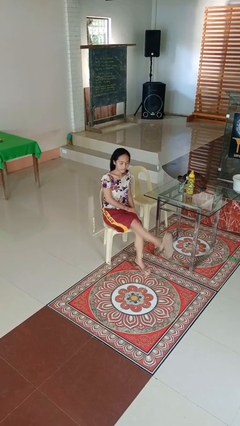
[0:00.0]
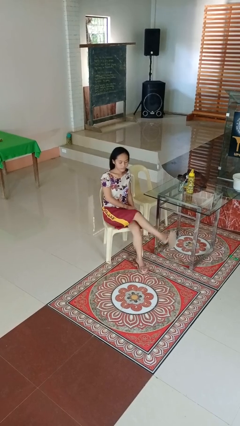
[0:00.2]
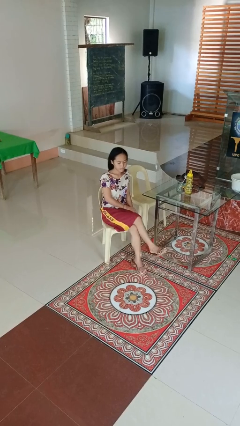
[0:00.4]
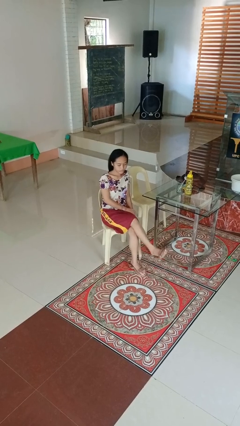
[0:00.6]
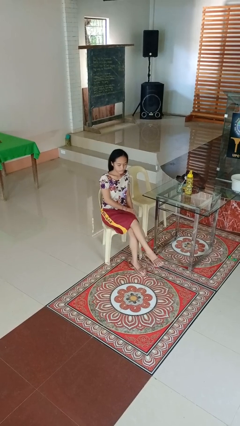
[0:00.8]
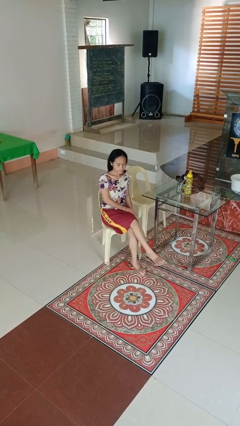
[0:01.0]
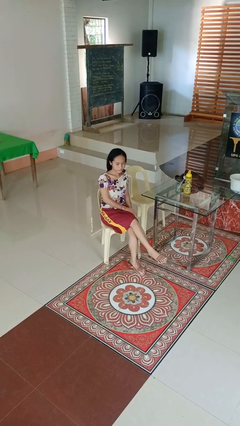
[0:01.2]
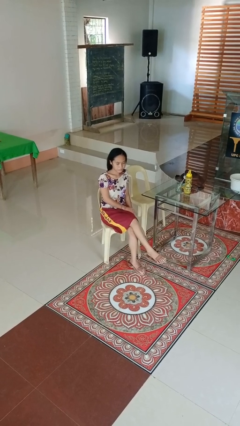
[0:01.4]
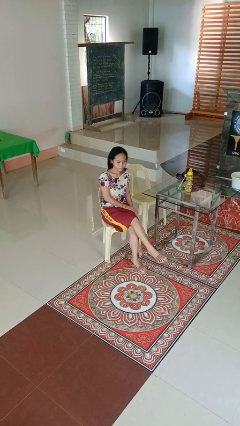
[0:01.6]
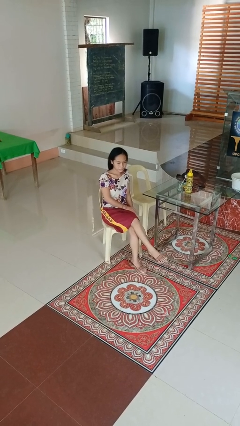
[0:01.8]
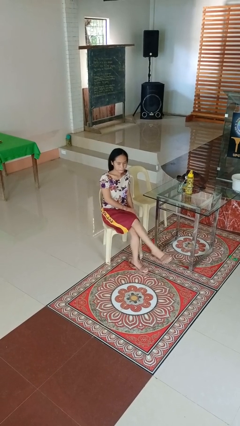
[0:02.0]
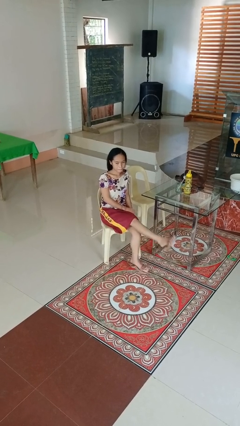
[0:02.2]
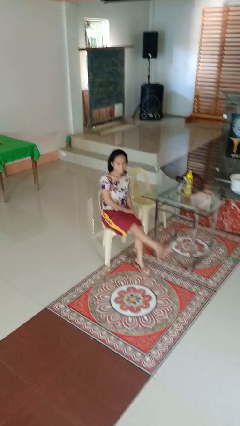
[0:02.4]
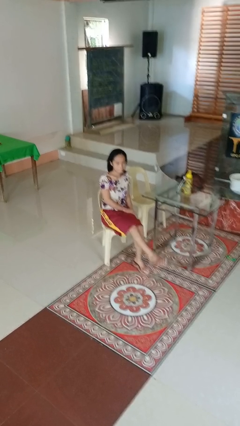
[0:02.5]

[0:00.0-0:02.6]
person crosses legs

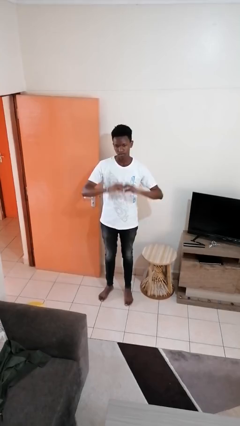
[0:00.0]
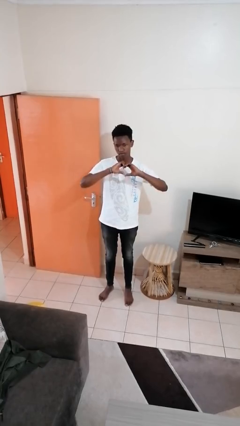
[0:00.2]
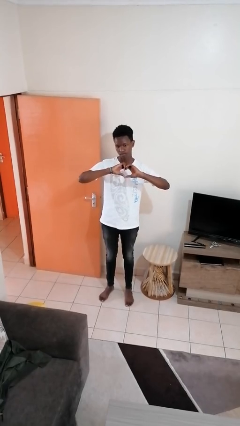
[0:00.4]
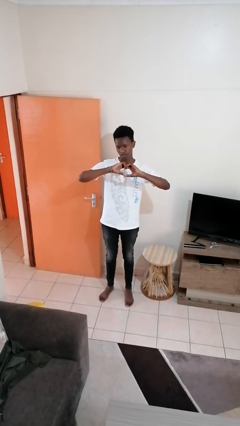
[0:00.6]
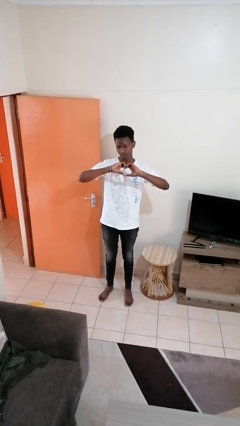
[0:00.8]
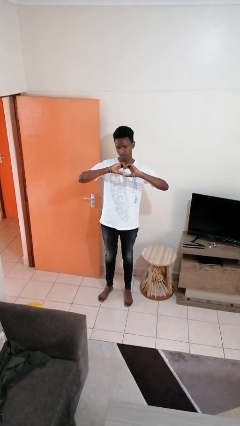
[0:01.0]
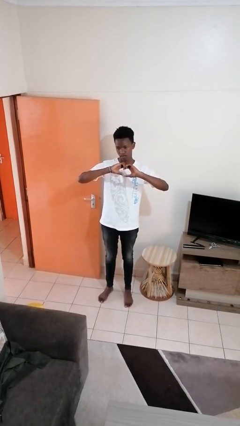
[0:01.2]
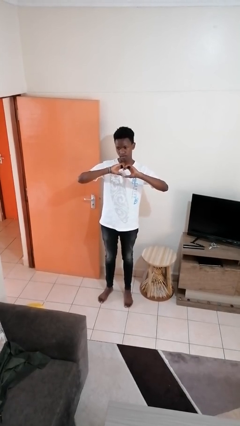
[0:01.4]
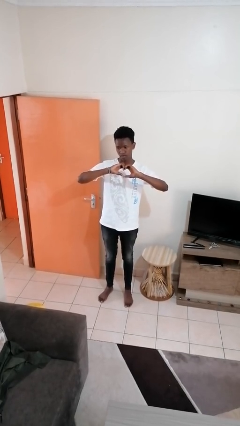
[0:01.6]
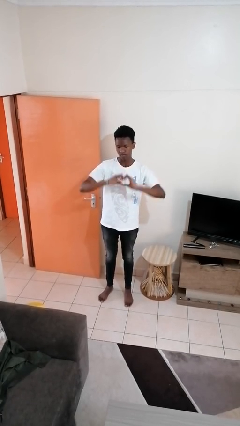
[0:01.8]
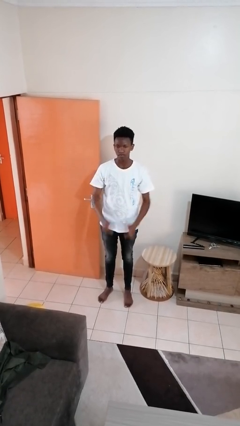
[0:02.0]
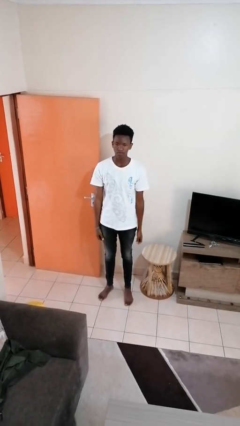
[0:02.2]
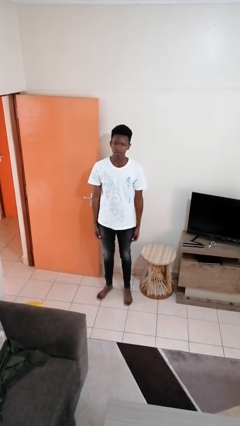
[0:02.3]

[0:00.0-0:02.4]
person gestures heart

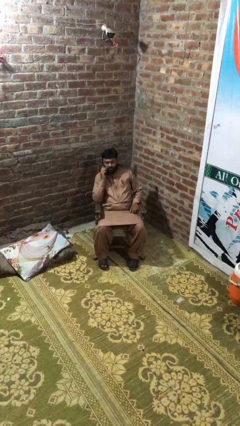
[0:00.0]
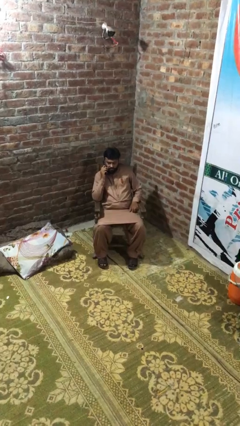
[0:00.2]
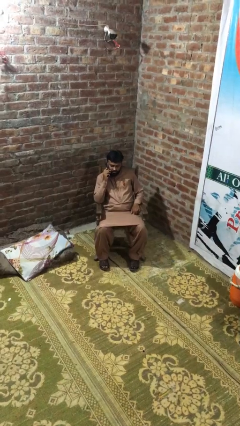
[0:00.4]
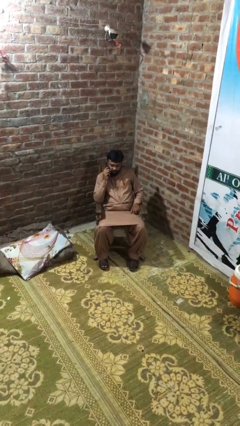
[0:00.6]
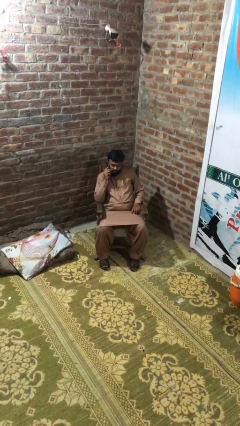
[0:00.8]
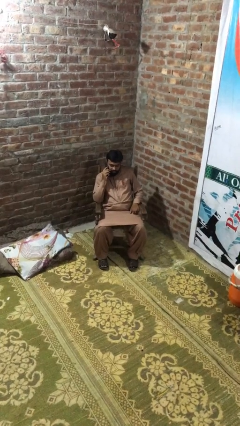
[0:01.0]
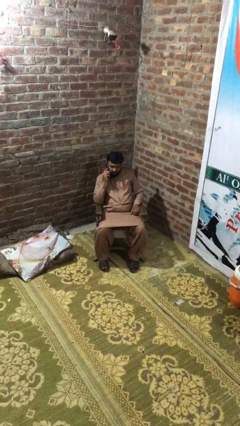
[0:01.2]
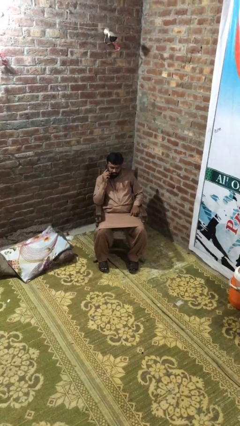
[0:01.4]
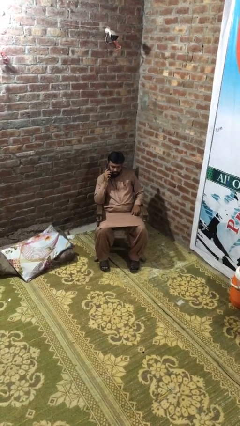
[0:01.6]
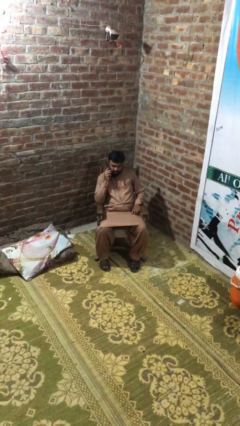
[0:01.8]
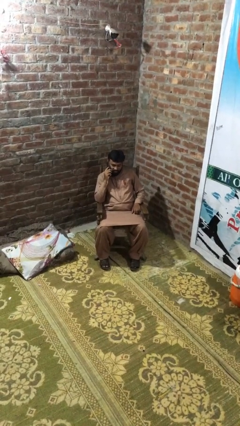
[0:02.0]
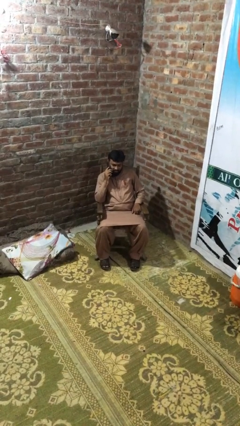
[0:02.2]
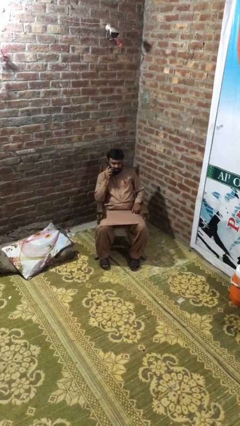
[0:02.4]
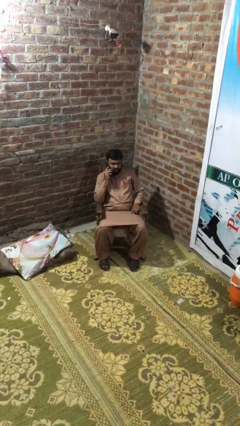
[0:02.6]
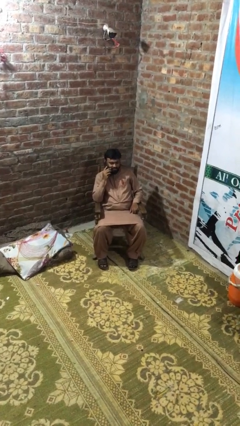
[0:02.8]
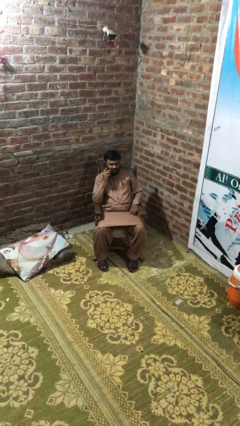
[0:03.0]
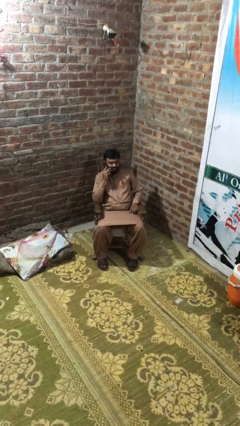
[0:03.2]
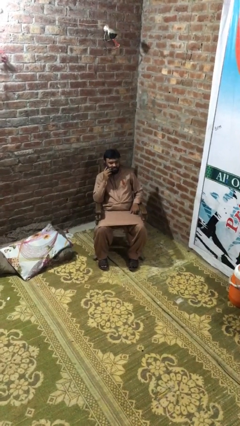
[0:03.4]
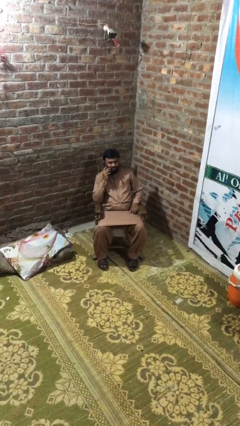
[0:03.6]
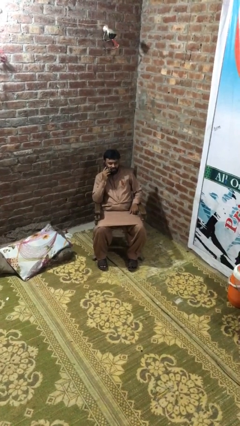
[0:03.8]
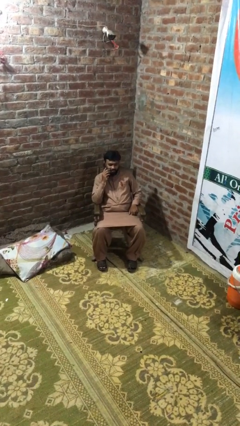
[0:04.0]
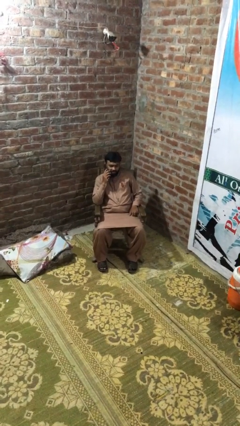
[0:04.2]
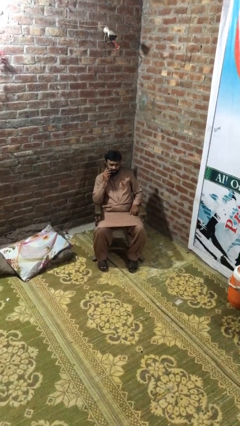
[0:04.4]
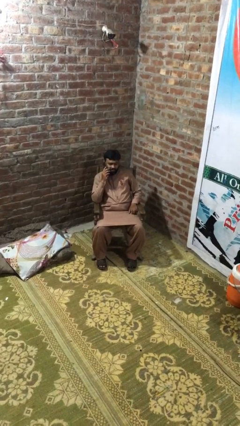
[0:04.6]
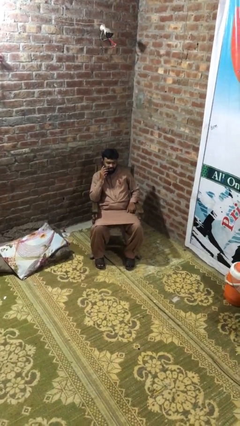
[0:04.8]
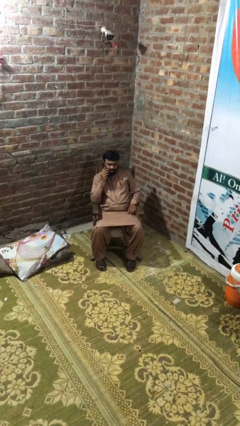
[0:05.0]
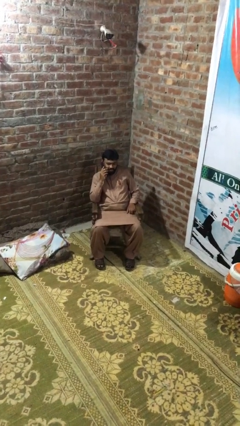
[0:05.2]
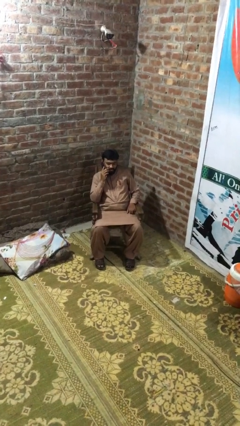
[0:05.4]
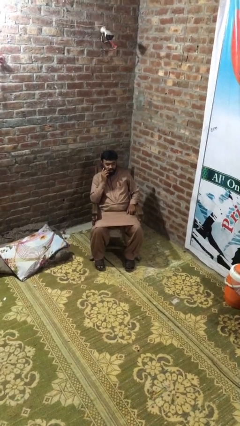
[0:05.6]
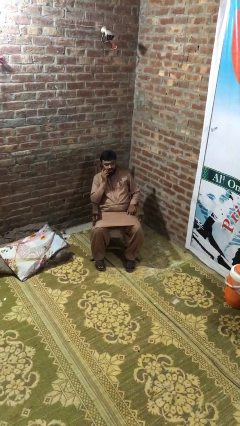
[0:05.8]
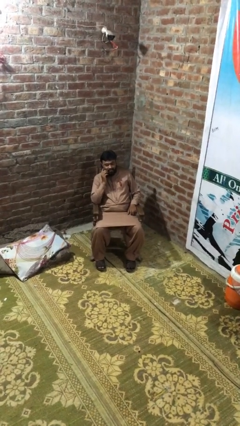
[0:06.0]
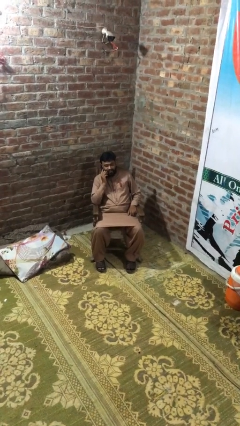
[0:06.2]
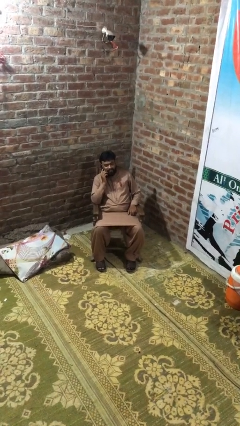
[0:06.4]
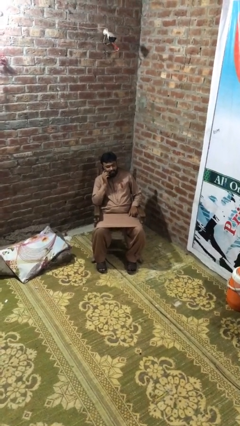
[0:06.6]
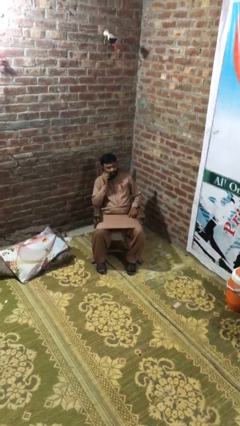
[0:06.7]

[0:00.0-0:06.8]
person talks on phone

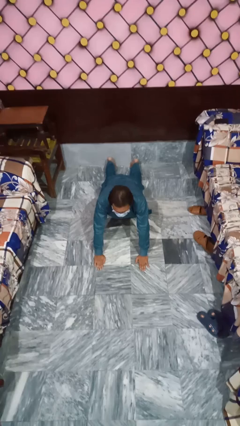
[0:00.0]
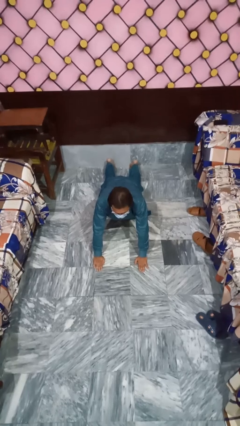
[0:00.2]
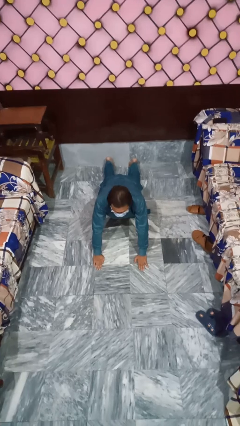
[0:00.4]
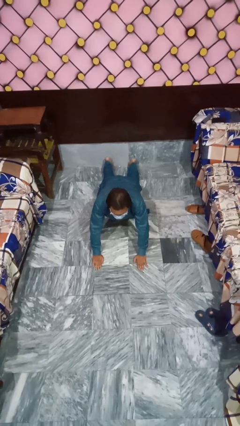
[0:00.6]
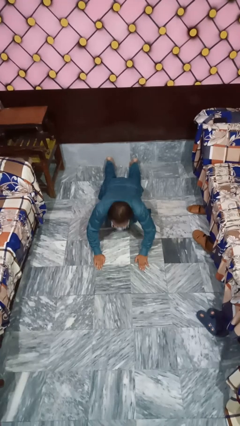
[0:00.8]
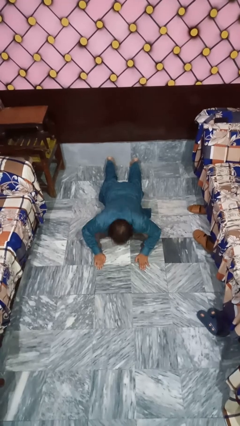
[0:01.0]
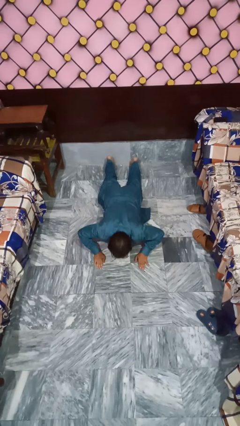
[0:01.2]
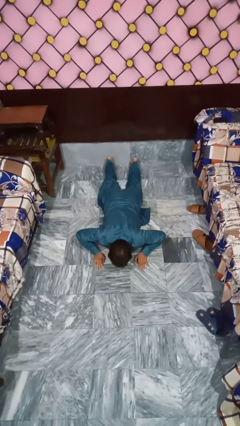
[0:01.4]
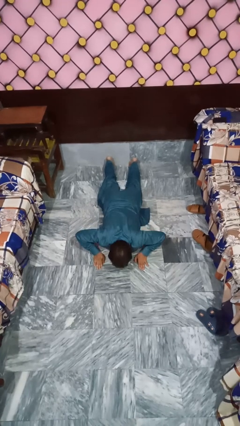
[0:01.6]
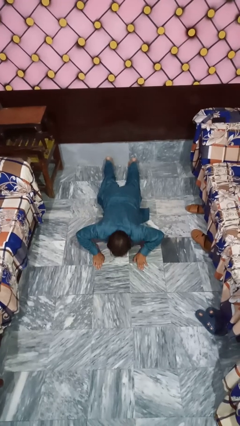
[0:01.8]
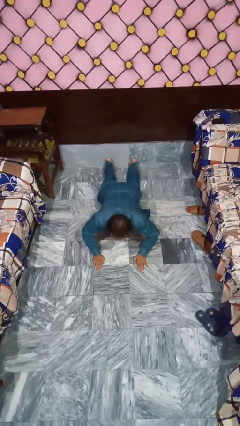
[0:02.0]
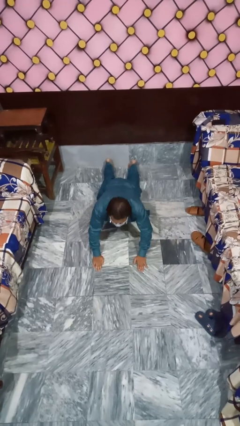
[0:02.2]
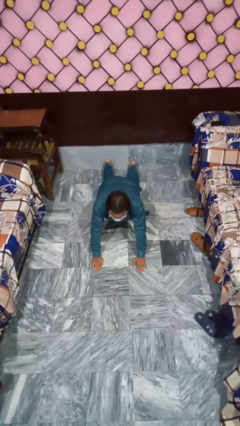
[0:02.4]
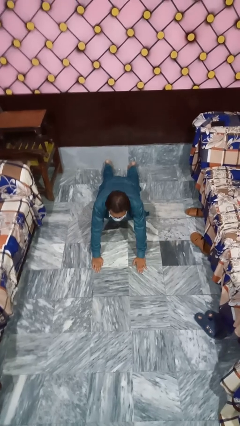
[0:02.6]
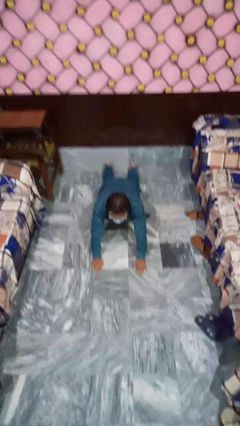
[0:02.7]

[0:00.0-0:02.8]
person exercises with pushup

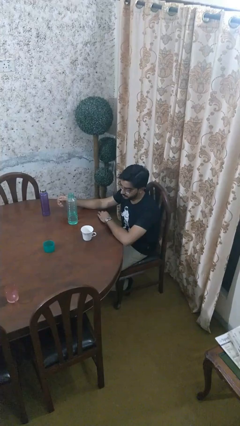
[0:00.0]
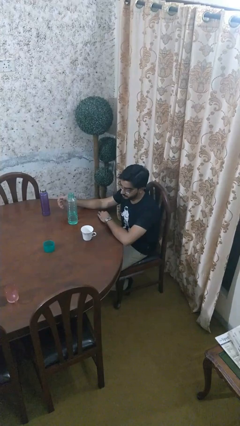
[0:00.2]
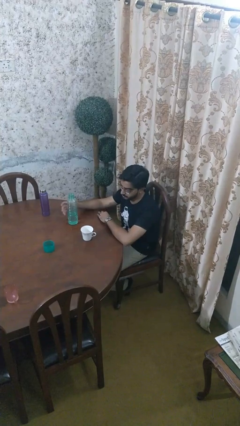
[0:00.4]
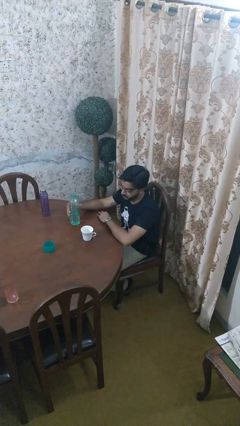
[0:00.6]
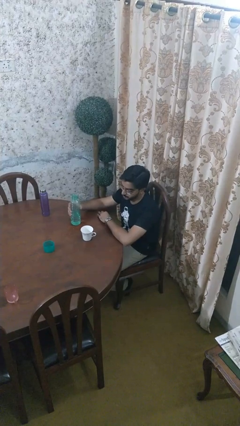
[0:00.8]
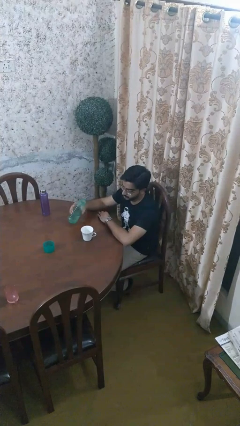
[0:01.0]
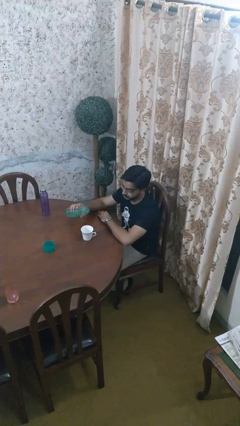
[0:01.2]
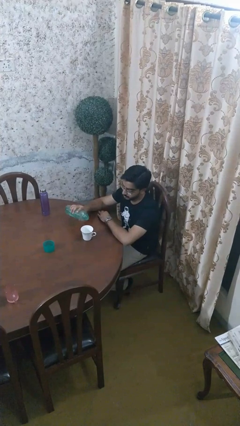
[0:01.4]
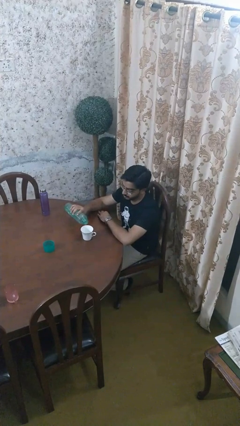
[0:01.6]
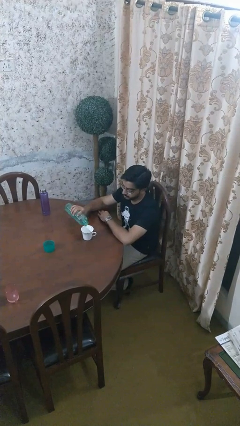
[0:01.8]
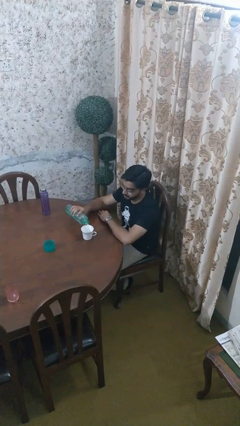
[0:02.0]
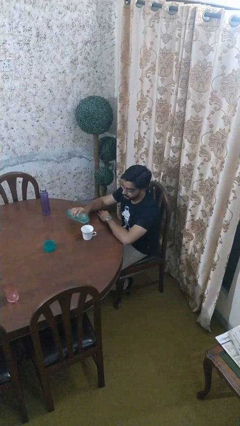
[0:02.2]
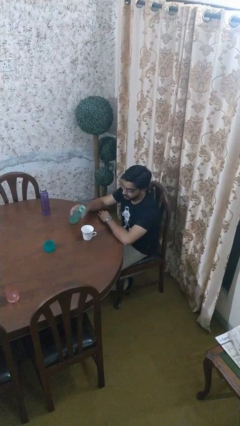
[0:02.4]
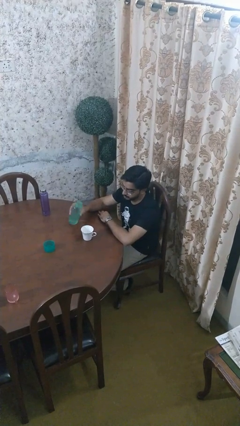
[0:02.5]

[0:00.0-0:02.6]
person pours liquid into cup

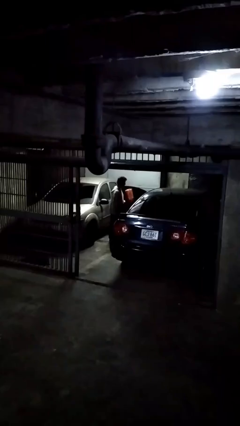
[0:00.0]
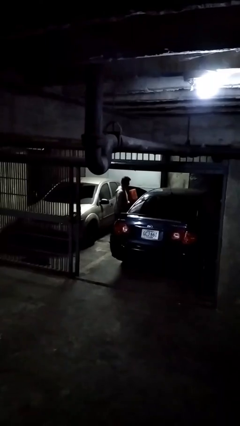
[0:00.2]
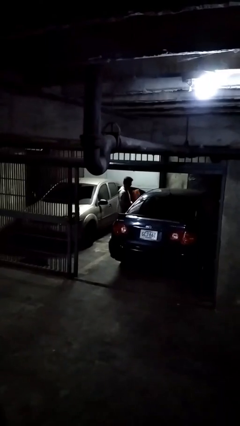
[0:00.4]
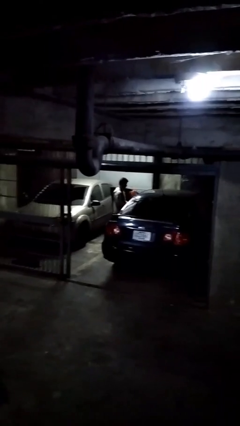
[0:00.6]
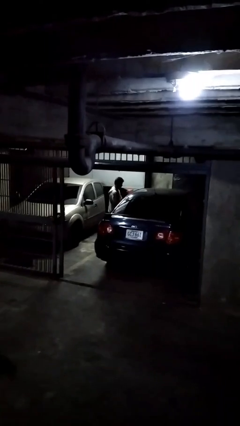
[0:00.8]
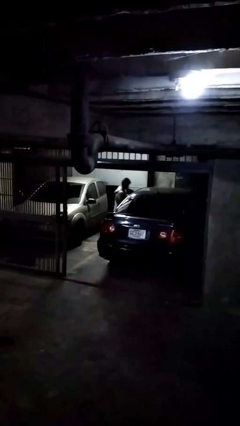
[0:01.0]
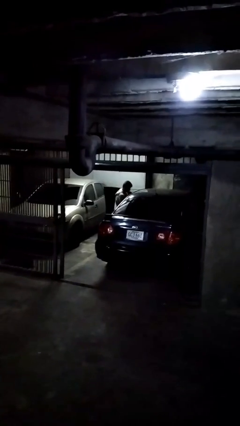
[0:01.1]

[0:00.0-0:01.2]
person loads car
